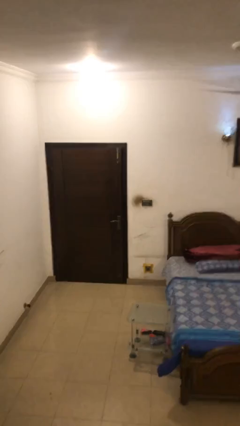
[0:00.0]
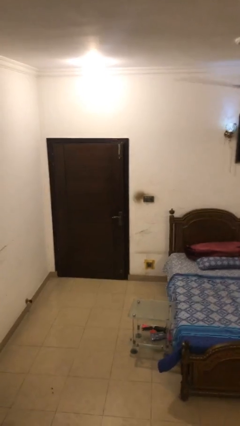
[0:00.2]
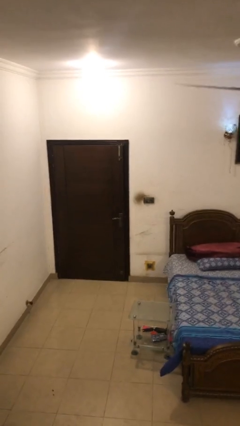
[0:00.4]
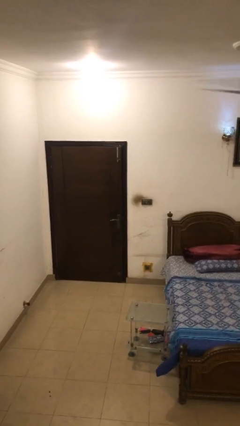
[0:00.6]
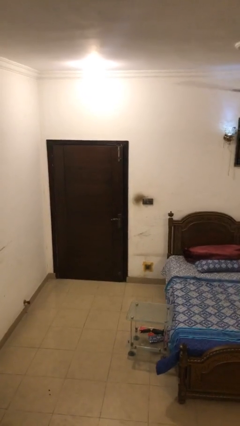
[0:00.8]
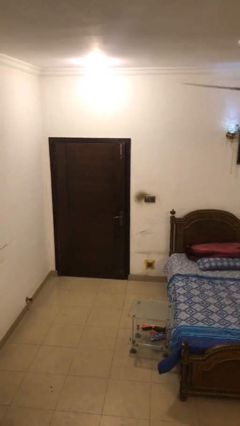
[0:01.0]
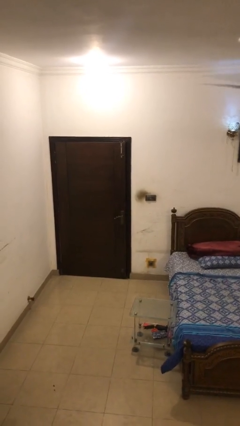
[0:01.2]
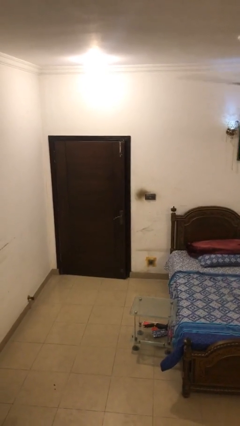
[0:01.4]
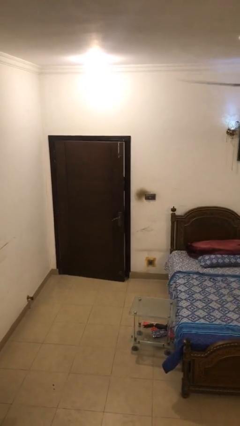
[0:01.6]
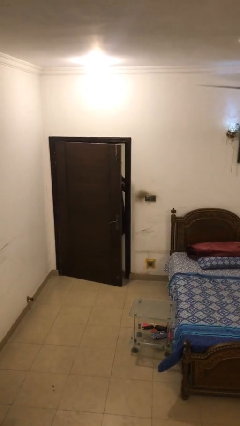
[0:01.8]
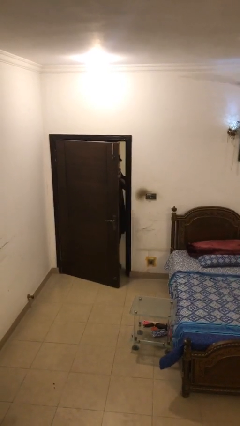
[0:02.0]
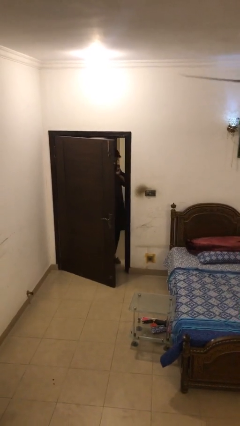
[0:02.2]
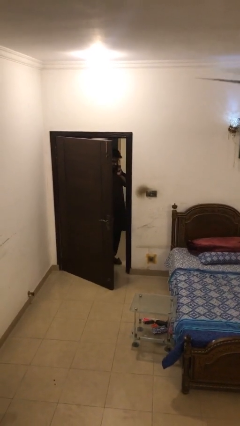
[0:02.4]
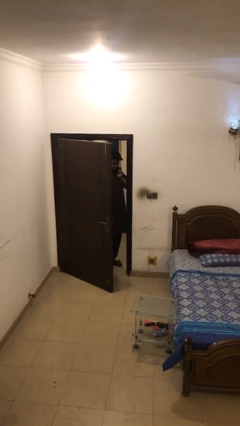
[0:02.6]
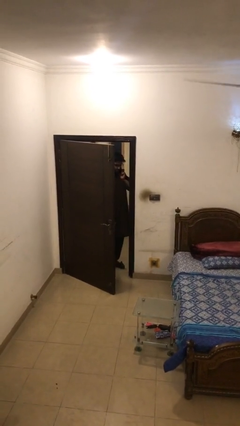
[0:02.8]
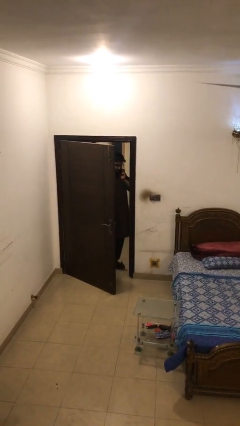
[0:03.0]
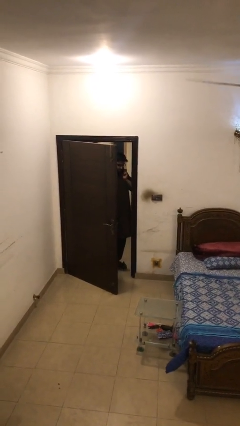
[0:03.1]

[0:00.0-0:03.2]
person opens facility door

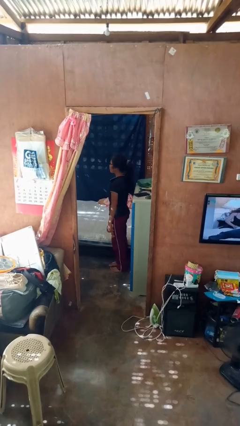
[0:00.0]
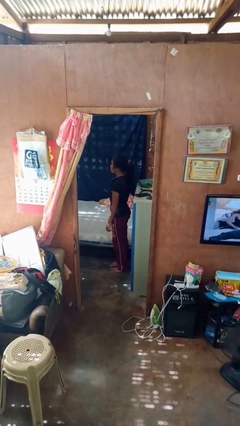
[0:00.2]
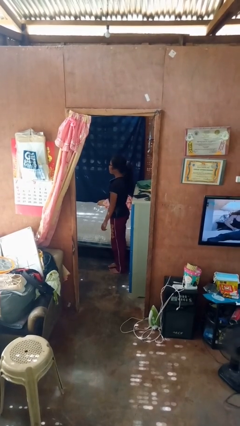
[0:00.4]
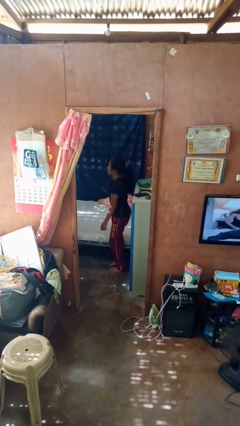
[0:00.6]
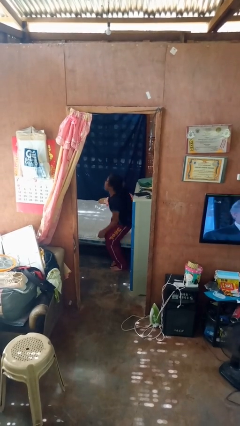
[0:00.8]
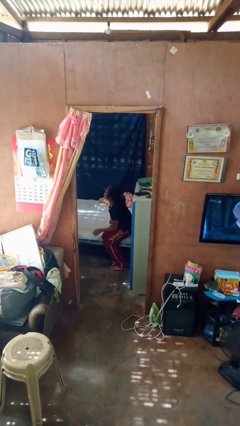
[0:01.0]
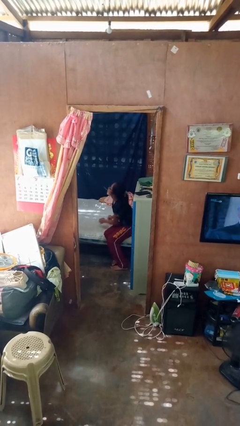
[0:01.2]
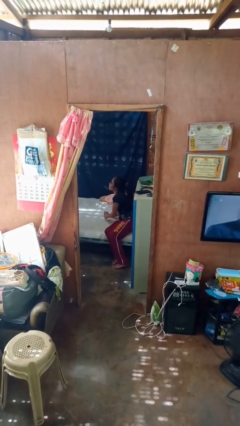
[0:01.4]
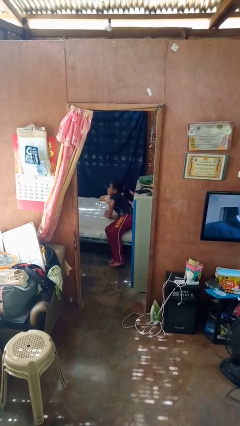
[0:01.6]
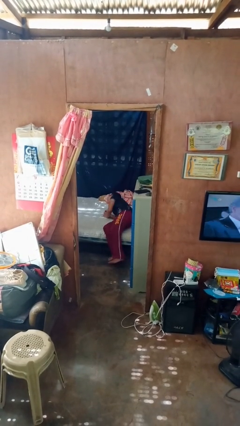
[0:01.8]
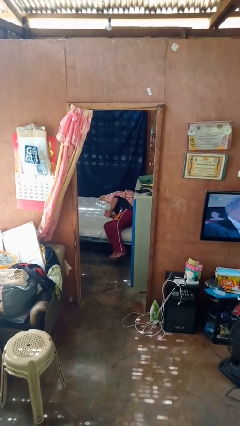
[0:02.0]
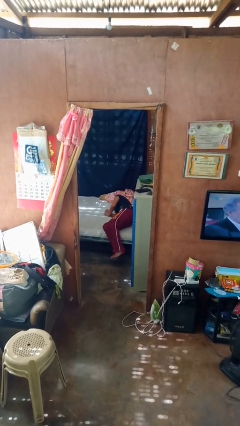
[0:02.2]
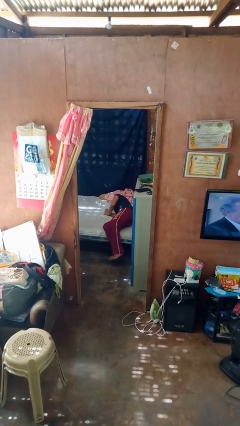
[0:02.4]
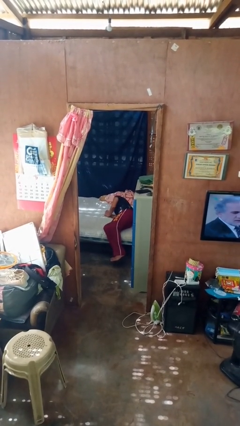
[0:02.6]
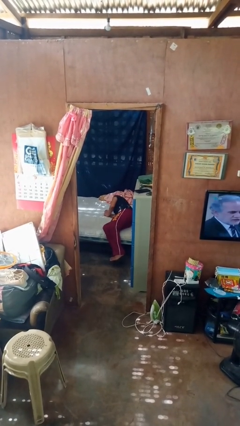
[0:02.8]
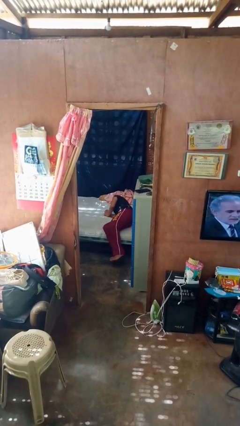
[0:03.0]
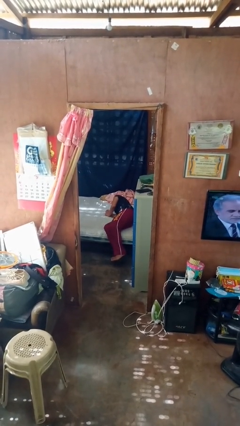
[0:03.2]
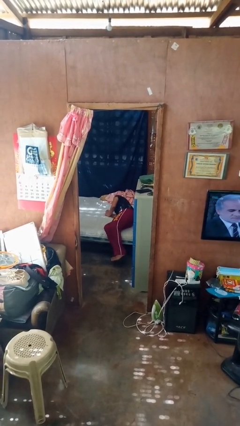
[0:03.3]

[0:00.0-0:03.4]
person lies down on bed

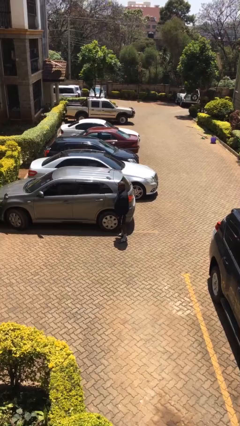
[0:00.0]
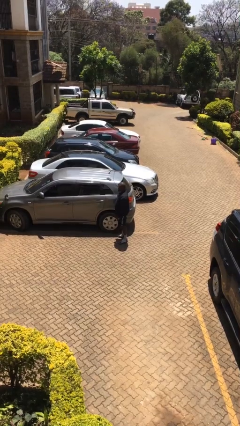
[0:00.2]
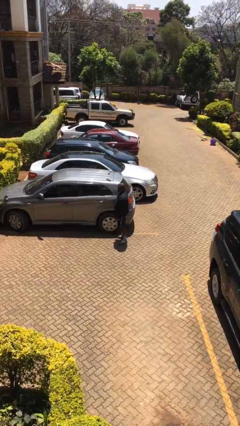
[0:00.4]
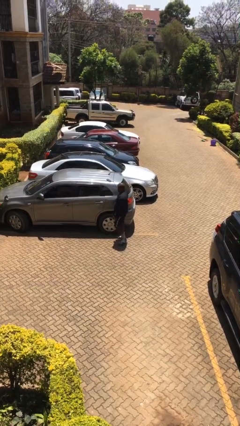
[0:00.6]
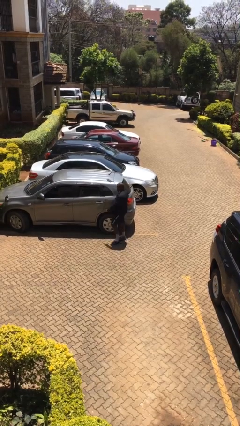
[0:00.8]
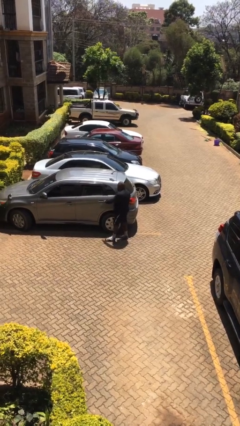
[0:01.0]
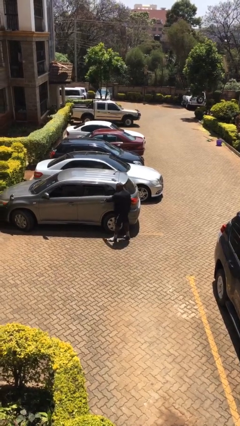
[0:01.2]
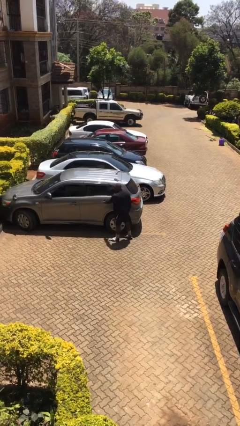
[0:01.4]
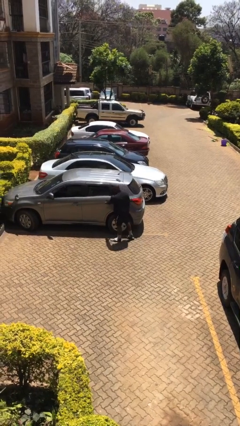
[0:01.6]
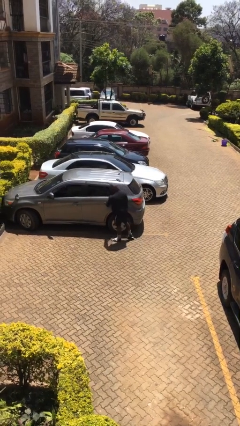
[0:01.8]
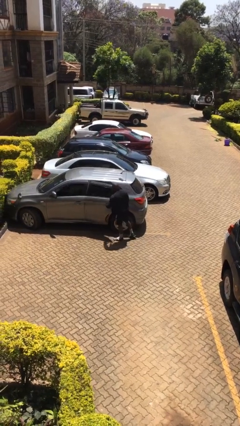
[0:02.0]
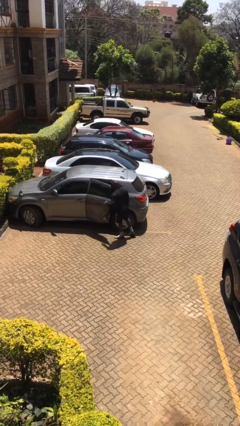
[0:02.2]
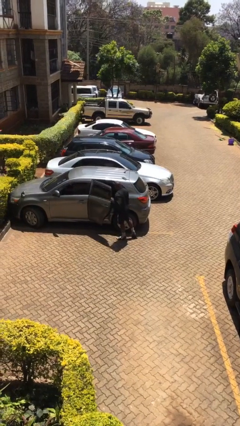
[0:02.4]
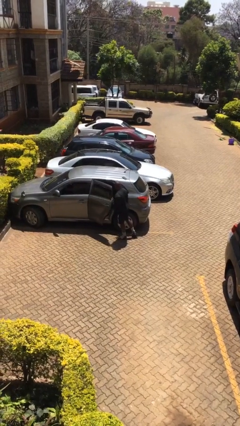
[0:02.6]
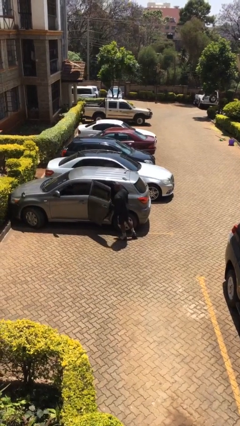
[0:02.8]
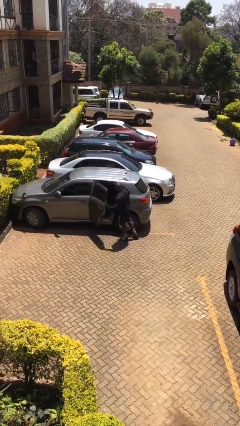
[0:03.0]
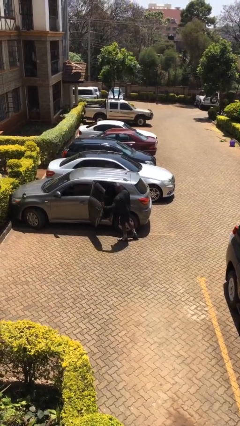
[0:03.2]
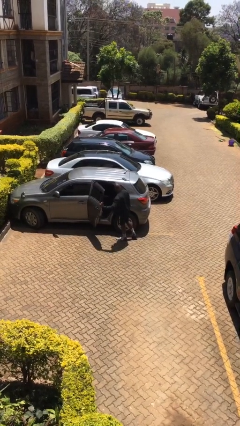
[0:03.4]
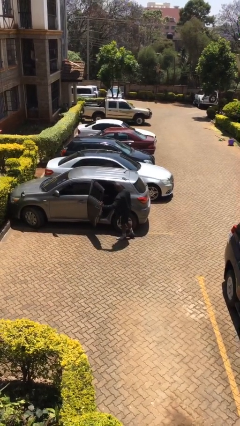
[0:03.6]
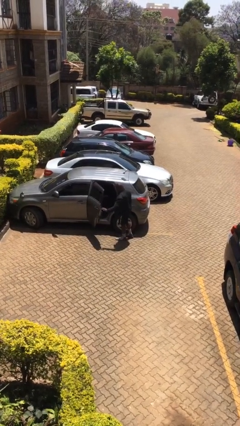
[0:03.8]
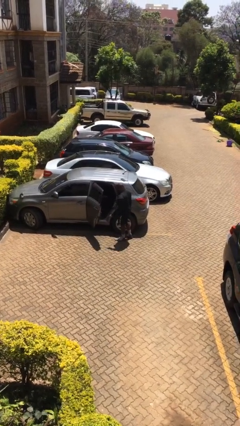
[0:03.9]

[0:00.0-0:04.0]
person opens car door

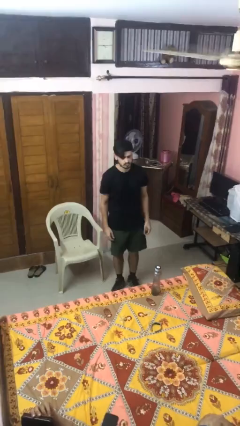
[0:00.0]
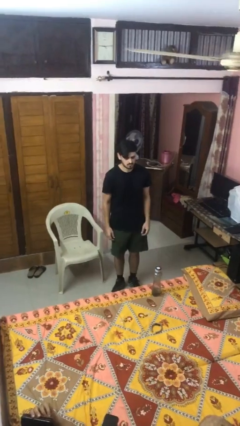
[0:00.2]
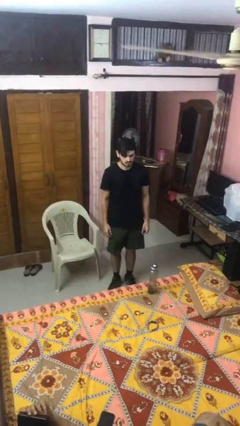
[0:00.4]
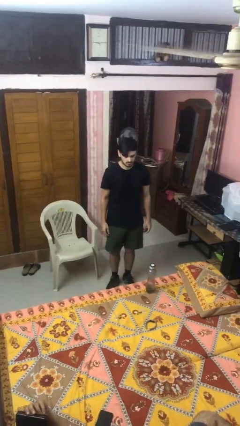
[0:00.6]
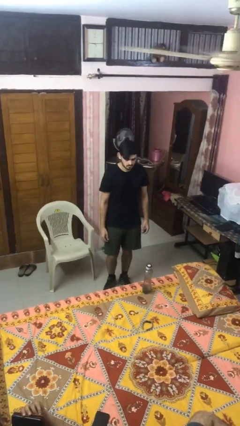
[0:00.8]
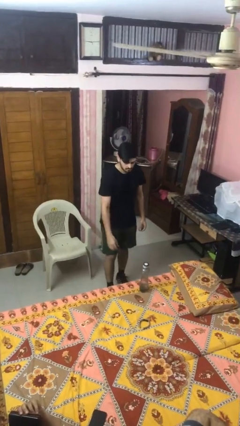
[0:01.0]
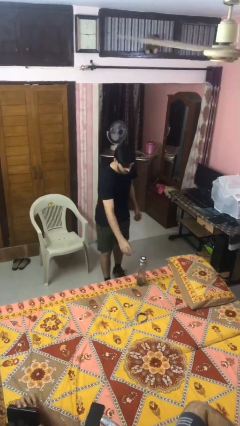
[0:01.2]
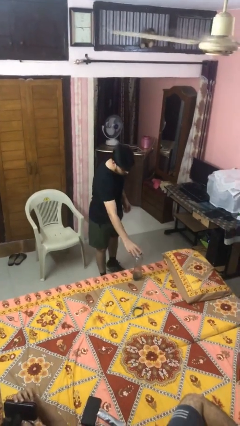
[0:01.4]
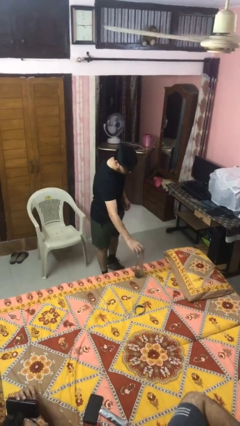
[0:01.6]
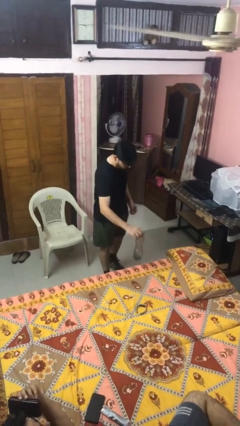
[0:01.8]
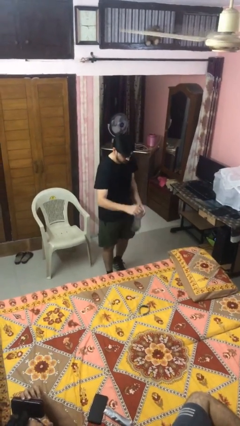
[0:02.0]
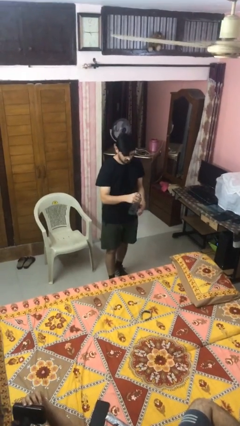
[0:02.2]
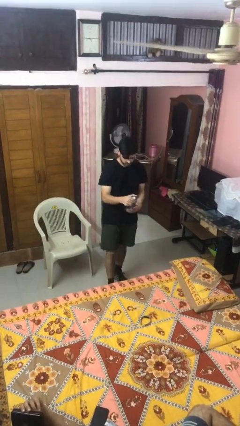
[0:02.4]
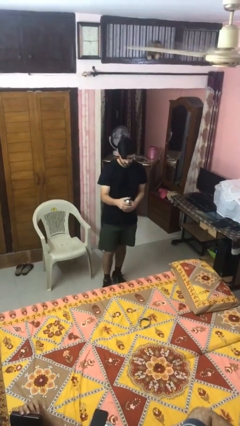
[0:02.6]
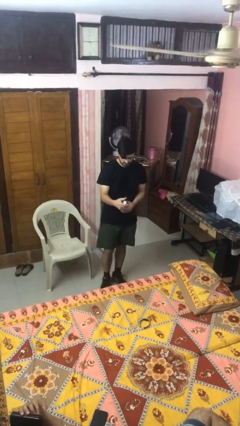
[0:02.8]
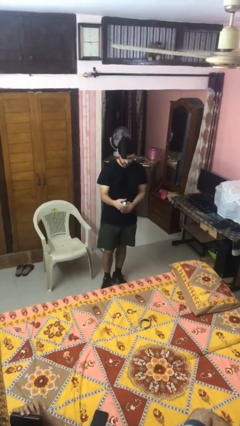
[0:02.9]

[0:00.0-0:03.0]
person picks up object from bed

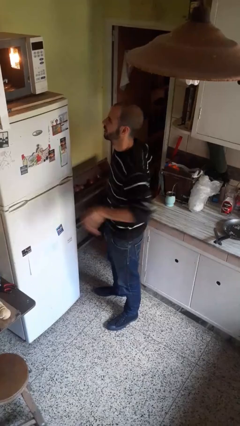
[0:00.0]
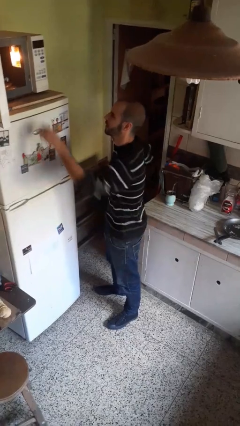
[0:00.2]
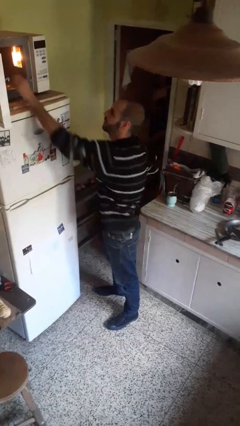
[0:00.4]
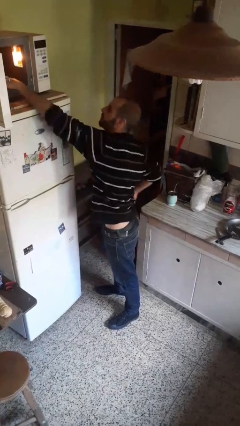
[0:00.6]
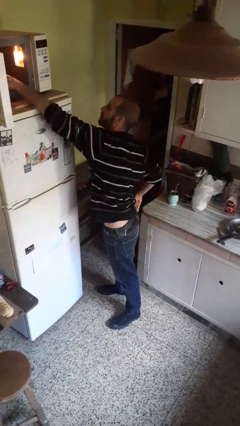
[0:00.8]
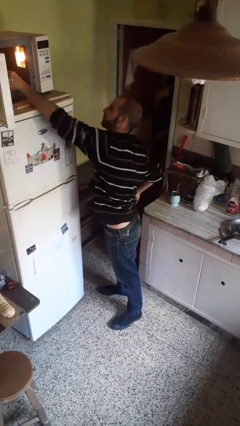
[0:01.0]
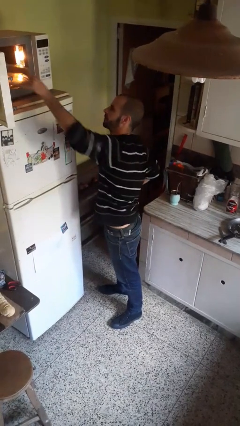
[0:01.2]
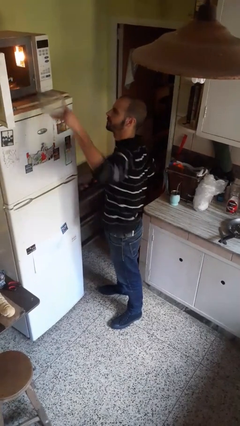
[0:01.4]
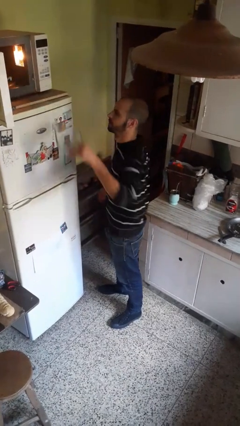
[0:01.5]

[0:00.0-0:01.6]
person takes object from microwave

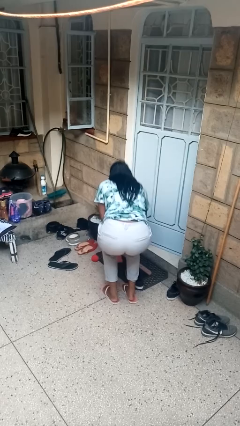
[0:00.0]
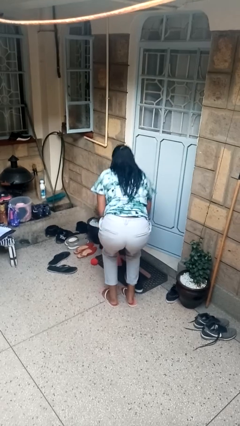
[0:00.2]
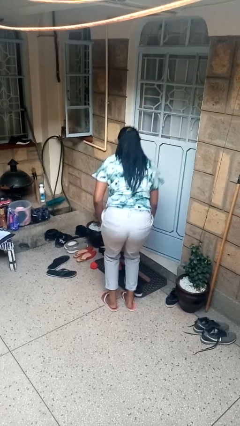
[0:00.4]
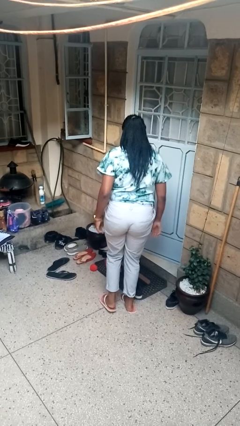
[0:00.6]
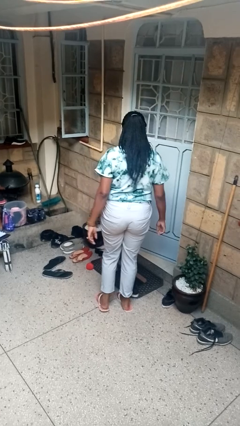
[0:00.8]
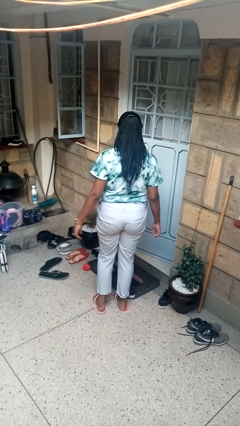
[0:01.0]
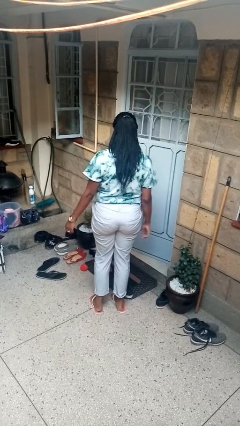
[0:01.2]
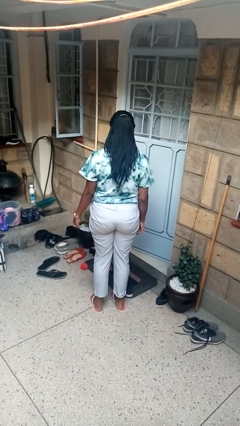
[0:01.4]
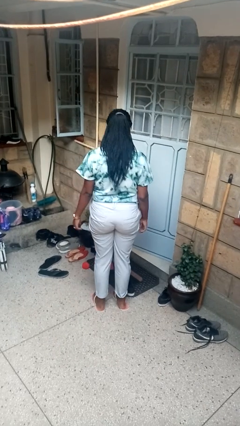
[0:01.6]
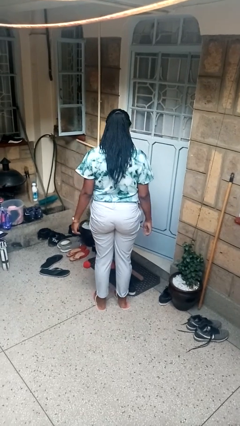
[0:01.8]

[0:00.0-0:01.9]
person stands up from floor

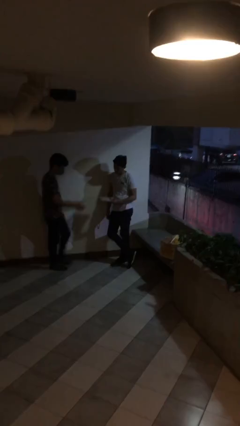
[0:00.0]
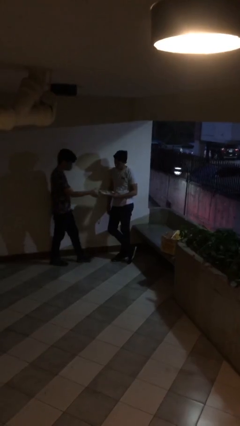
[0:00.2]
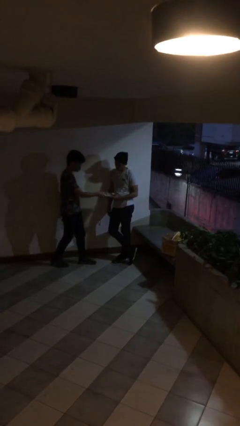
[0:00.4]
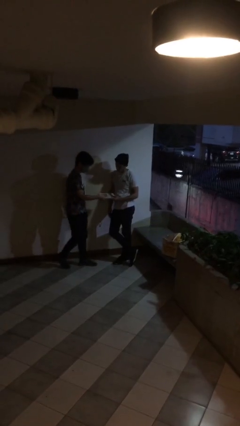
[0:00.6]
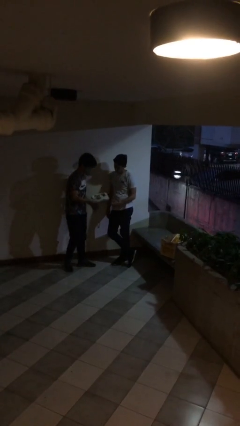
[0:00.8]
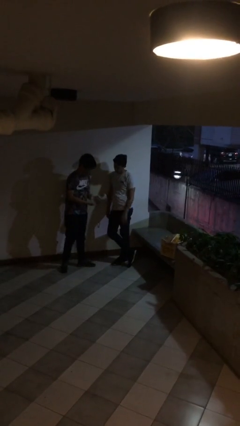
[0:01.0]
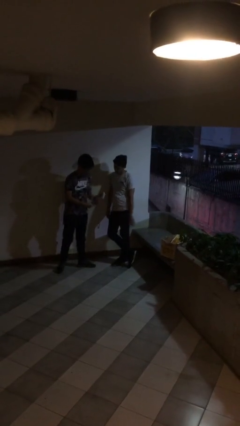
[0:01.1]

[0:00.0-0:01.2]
person transfers object to person
